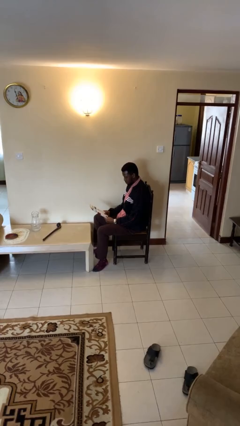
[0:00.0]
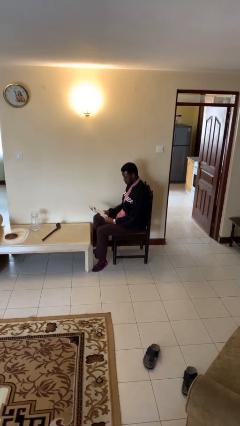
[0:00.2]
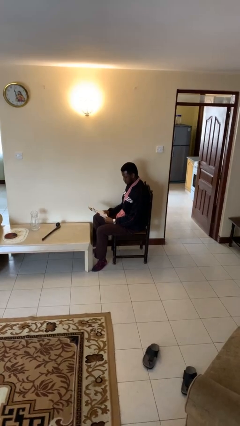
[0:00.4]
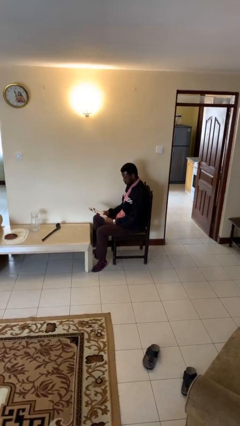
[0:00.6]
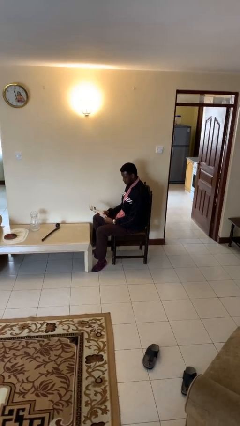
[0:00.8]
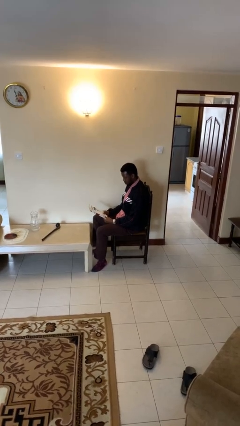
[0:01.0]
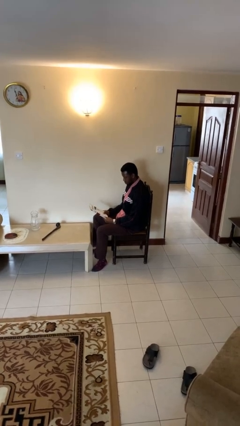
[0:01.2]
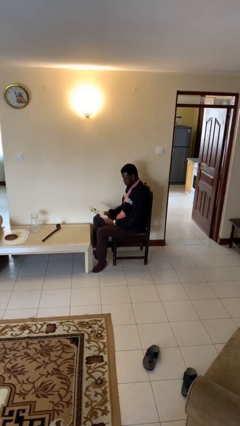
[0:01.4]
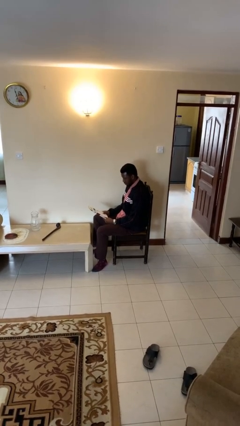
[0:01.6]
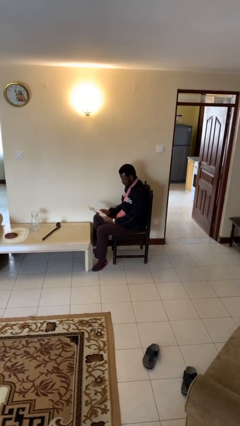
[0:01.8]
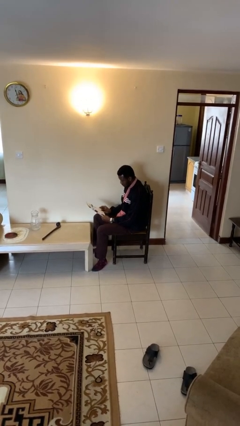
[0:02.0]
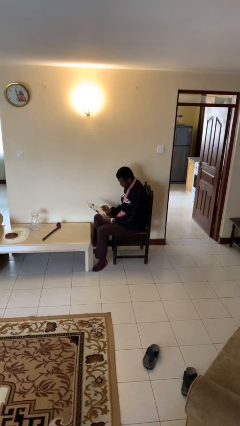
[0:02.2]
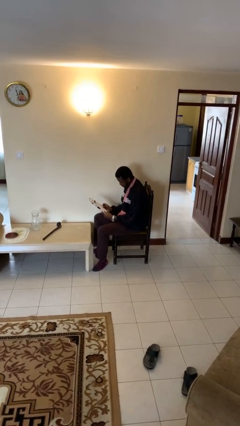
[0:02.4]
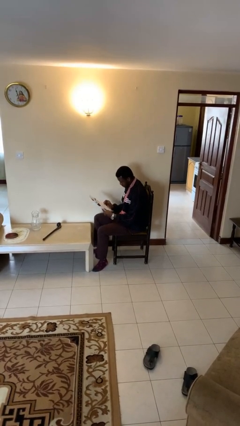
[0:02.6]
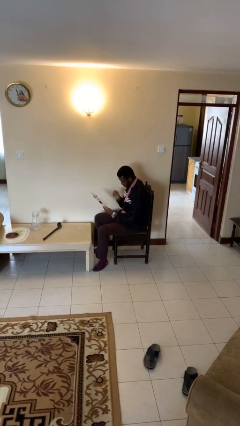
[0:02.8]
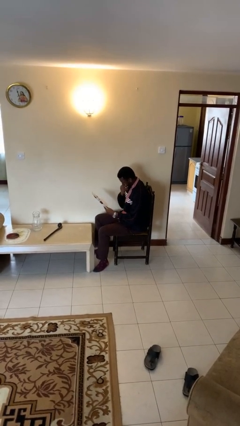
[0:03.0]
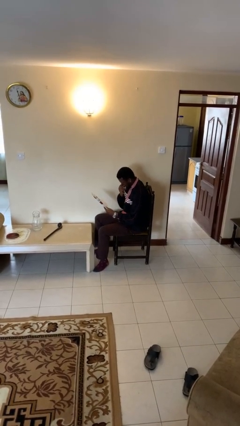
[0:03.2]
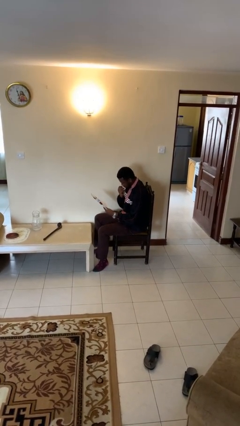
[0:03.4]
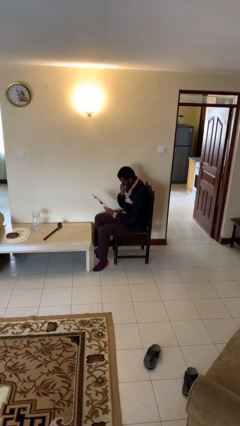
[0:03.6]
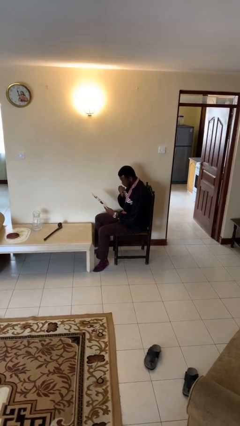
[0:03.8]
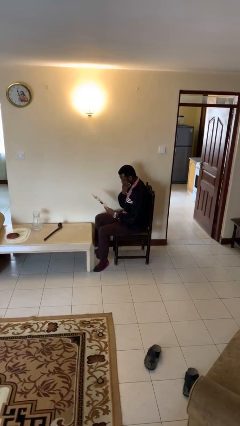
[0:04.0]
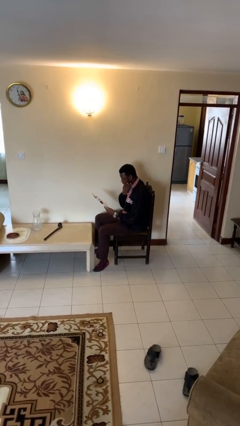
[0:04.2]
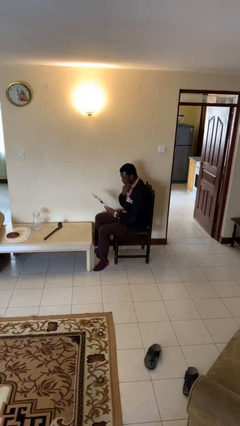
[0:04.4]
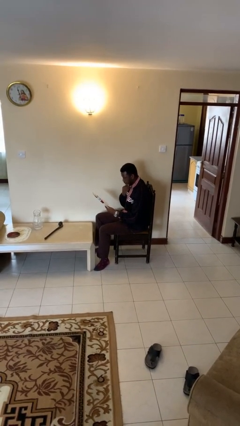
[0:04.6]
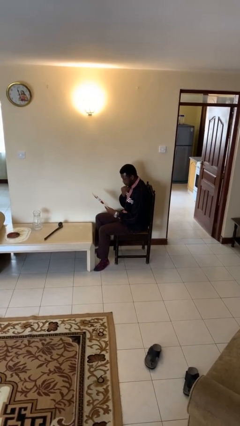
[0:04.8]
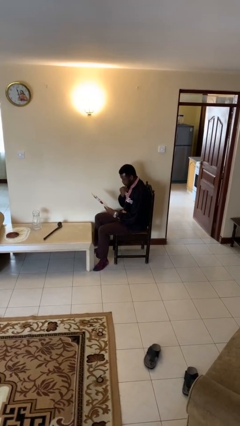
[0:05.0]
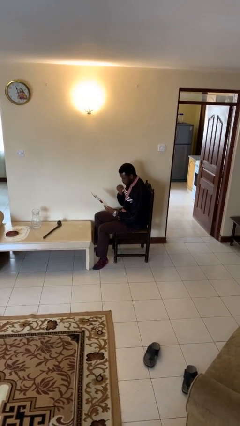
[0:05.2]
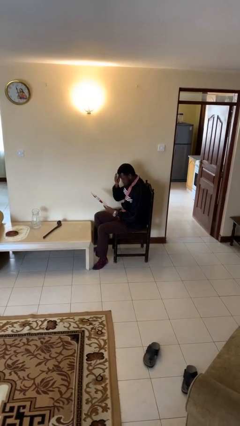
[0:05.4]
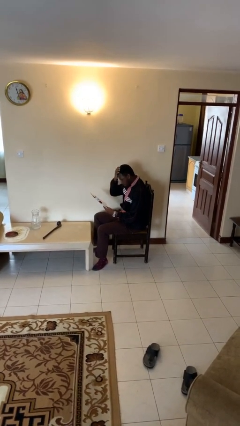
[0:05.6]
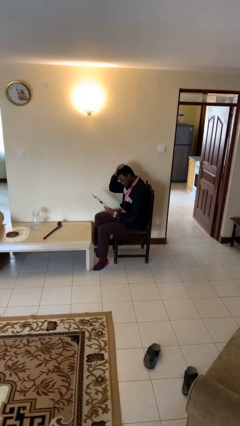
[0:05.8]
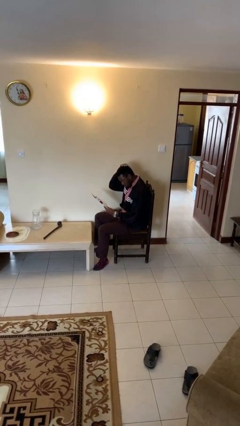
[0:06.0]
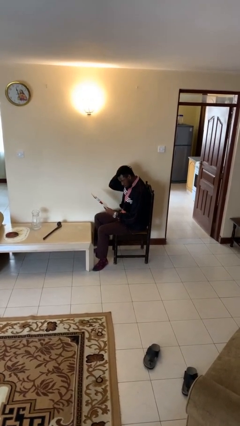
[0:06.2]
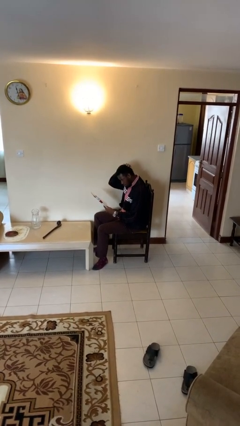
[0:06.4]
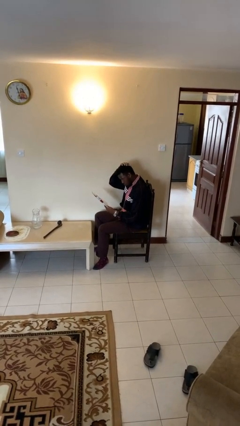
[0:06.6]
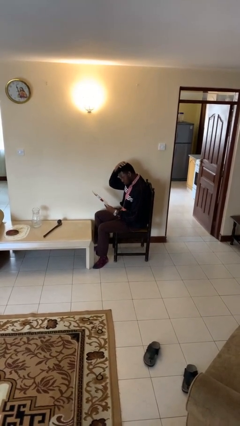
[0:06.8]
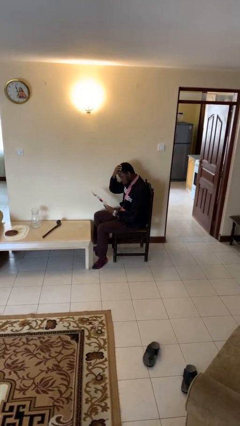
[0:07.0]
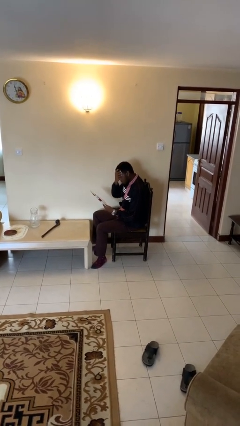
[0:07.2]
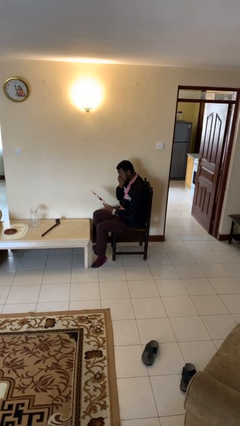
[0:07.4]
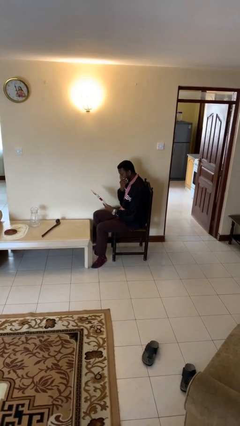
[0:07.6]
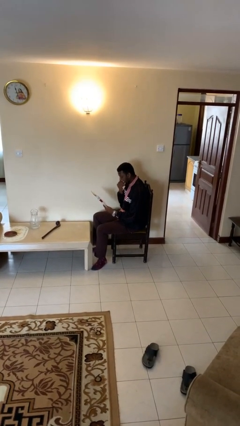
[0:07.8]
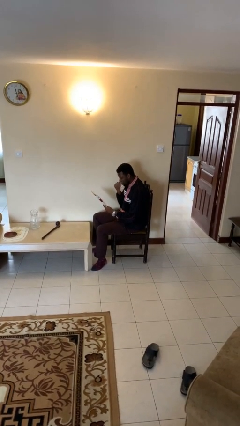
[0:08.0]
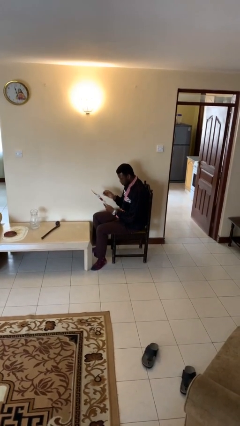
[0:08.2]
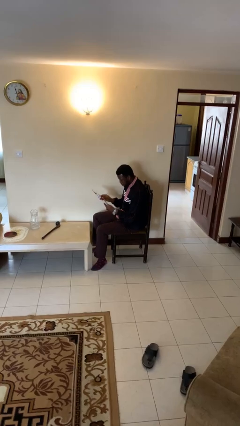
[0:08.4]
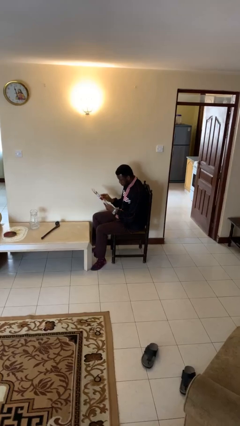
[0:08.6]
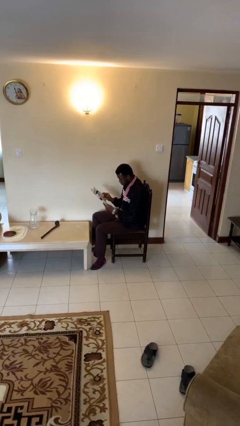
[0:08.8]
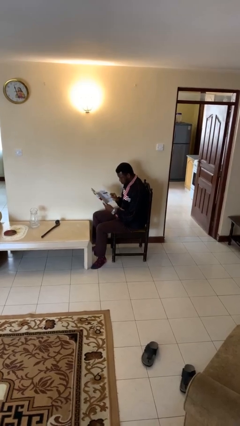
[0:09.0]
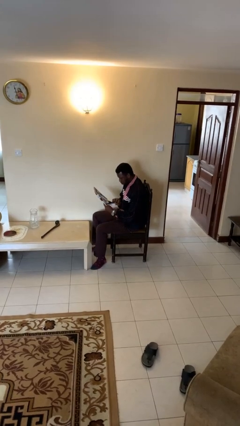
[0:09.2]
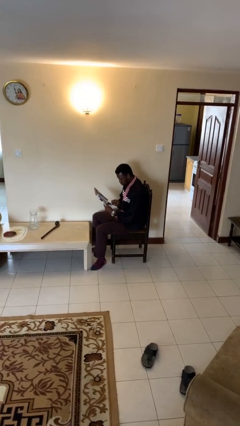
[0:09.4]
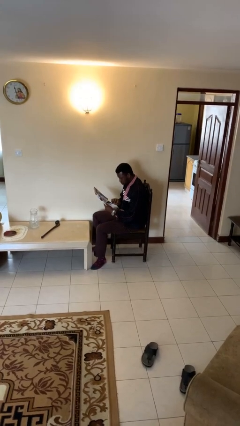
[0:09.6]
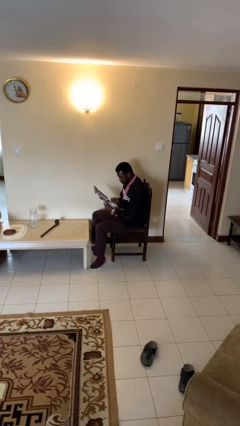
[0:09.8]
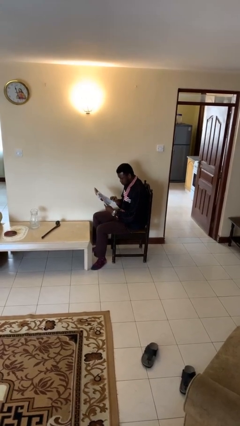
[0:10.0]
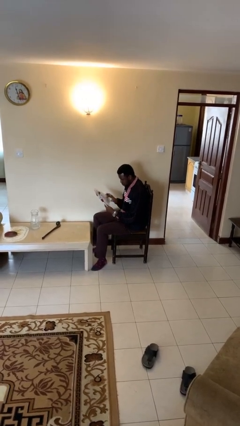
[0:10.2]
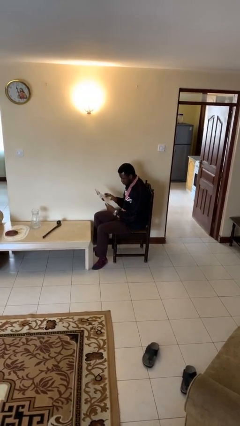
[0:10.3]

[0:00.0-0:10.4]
person reads document

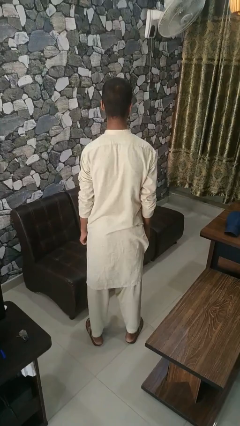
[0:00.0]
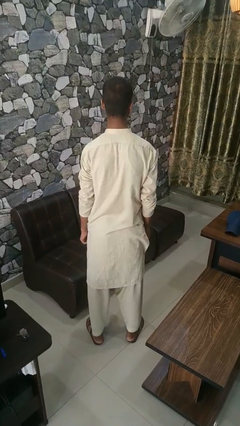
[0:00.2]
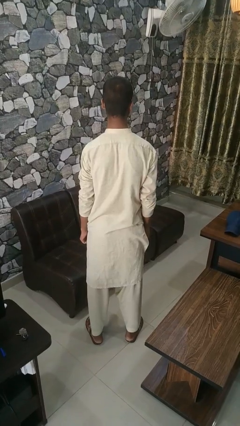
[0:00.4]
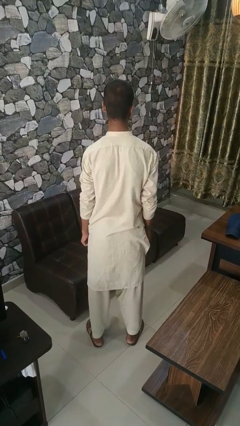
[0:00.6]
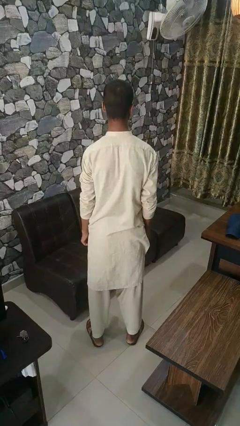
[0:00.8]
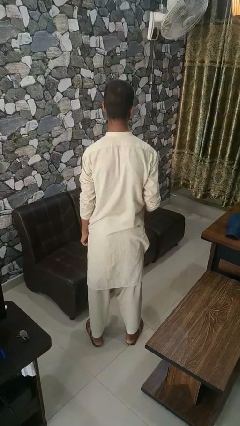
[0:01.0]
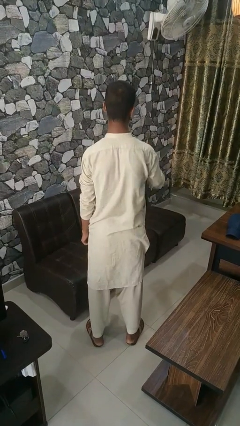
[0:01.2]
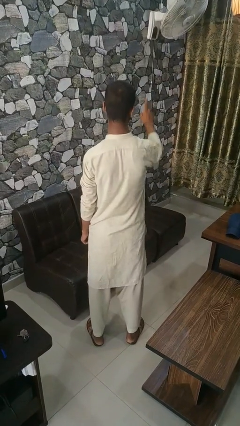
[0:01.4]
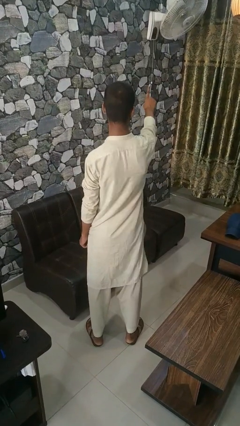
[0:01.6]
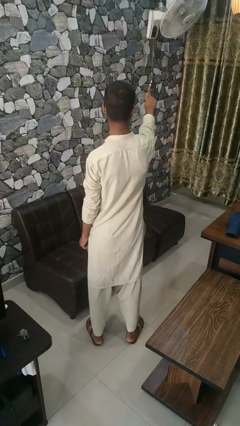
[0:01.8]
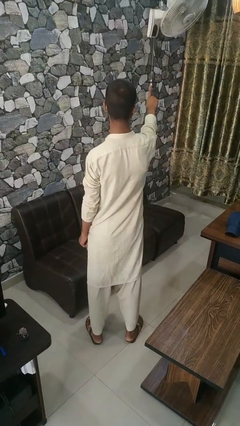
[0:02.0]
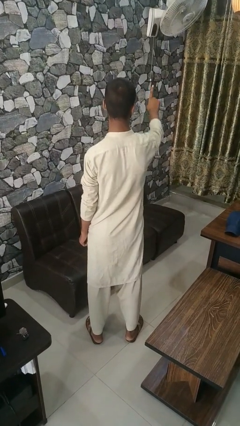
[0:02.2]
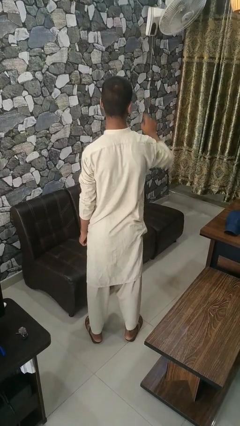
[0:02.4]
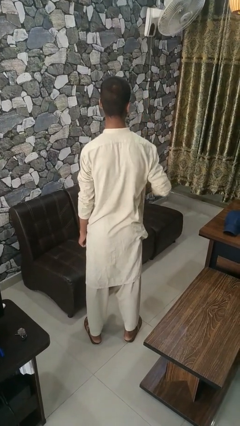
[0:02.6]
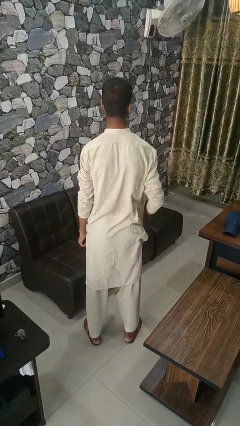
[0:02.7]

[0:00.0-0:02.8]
person gestures number one

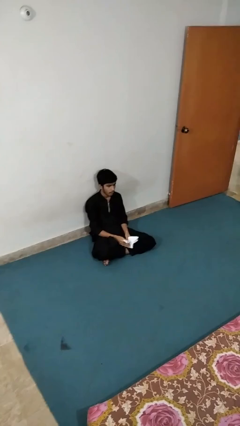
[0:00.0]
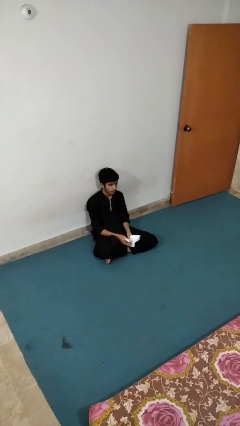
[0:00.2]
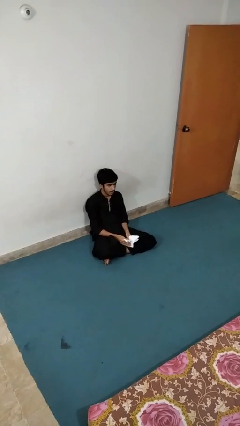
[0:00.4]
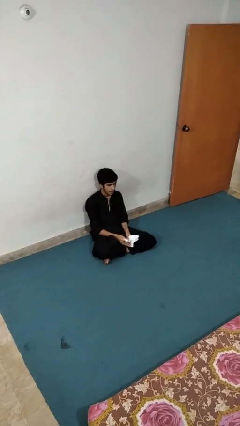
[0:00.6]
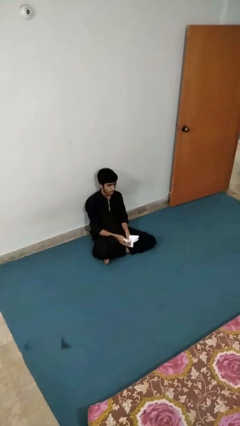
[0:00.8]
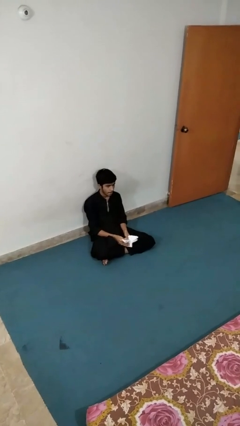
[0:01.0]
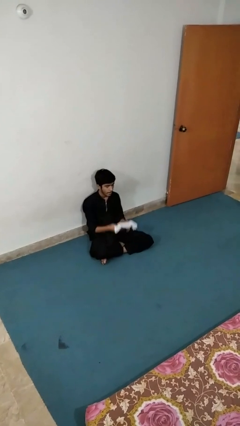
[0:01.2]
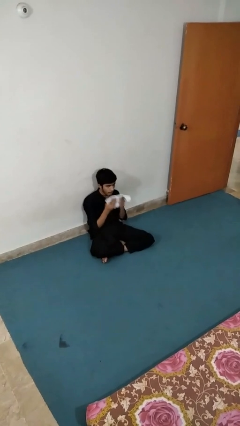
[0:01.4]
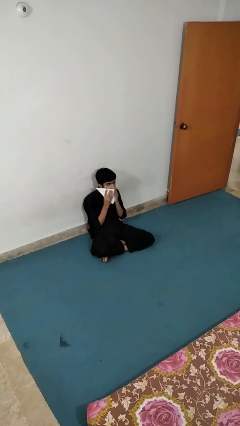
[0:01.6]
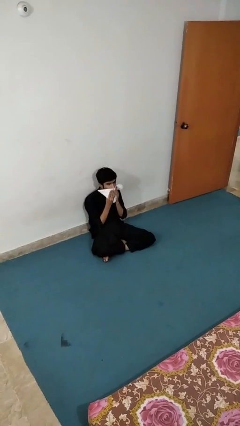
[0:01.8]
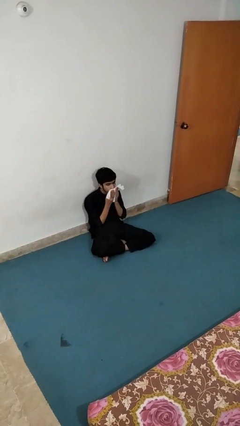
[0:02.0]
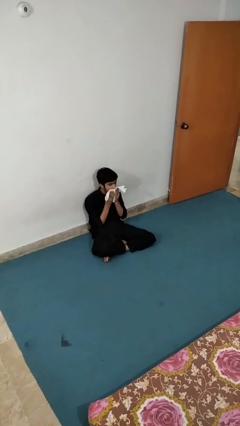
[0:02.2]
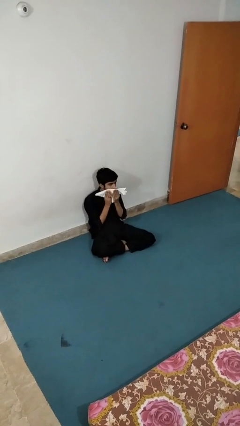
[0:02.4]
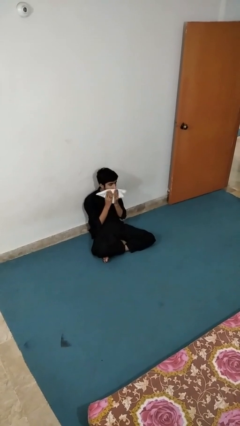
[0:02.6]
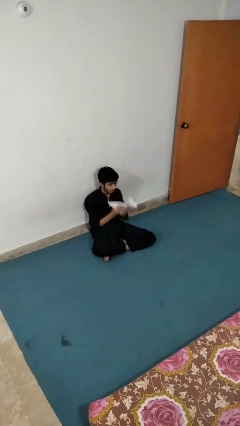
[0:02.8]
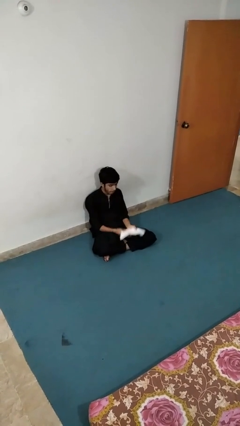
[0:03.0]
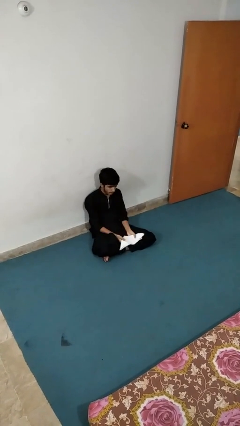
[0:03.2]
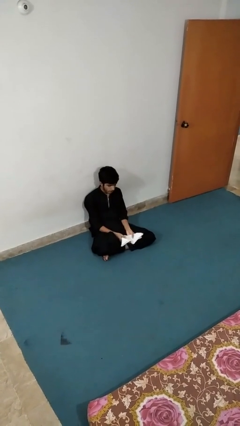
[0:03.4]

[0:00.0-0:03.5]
person wipes mouth with napkin

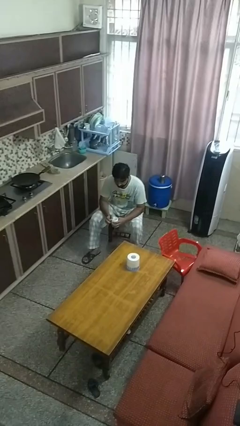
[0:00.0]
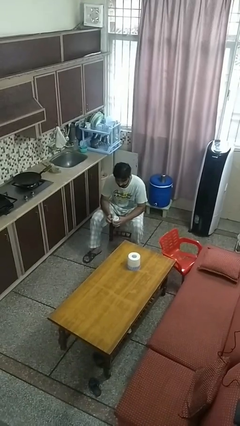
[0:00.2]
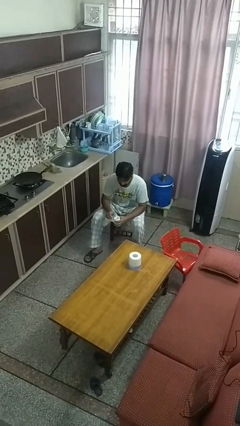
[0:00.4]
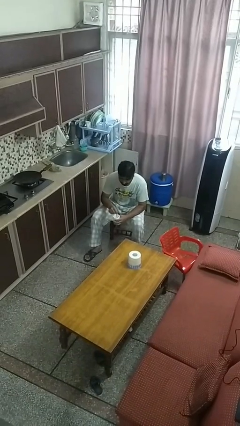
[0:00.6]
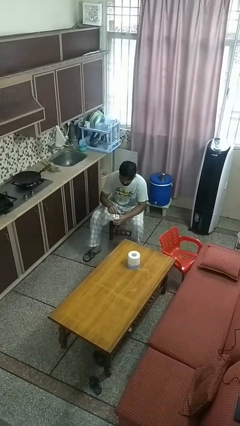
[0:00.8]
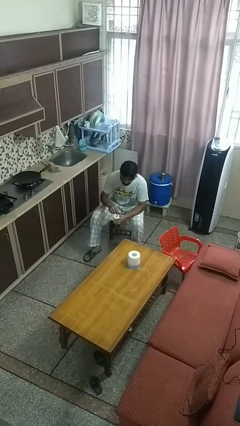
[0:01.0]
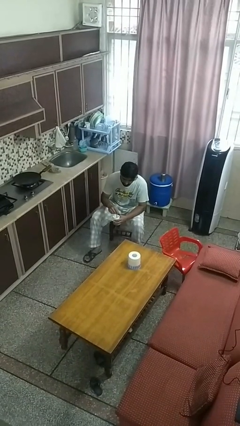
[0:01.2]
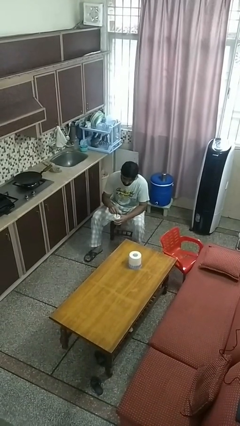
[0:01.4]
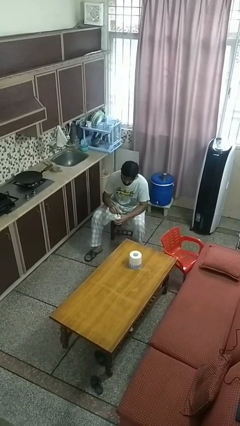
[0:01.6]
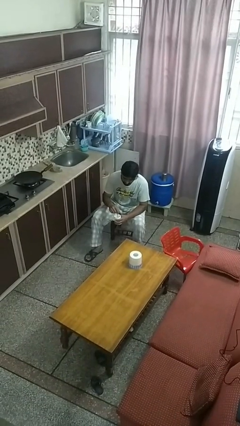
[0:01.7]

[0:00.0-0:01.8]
person stirs mug
